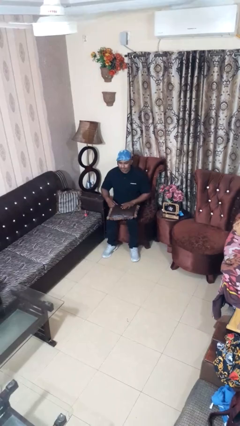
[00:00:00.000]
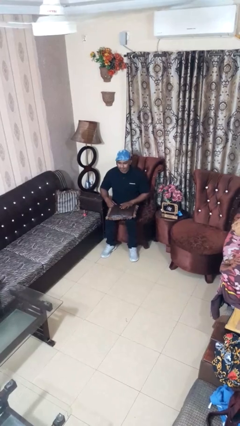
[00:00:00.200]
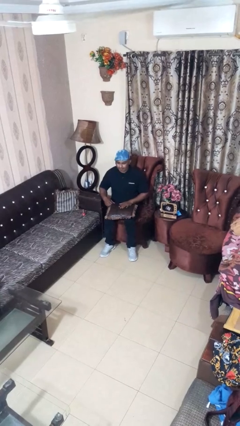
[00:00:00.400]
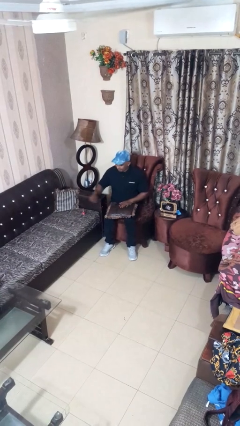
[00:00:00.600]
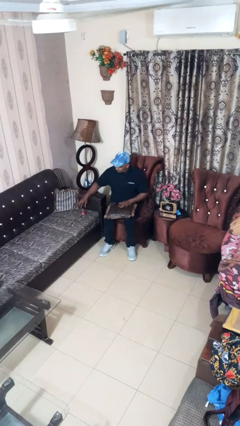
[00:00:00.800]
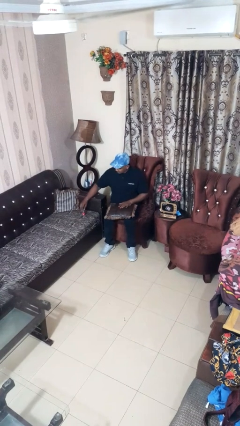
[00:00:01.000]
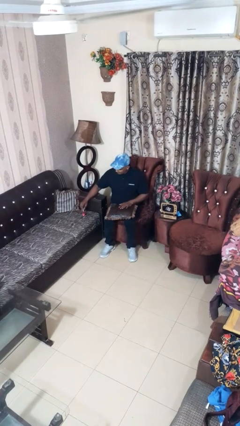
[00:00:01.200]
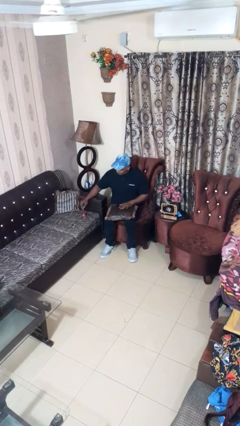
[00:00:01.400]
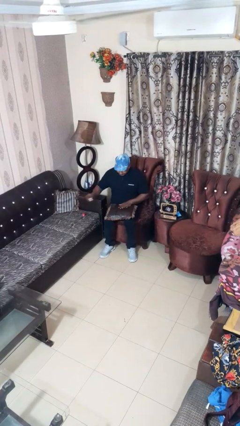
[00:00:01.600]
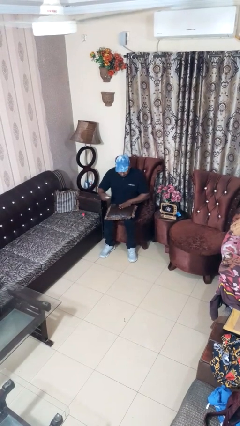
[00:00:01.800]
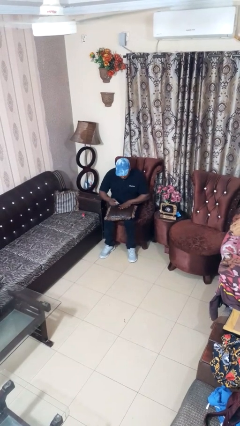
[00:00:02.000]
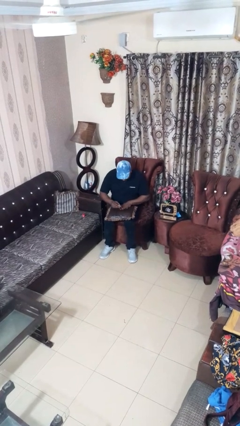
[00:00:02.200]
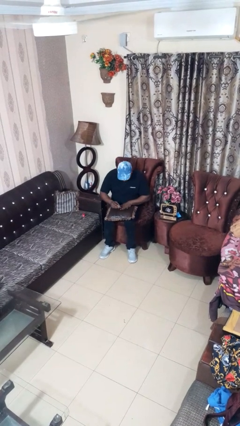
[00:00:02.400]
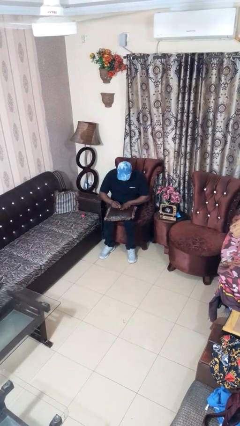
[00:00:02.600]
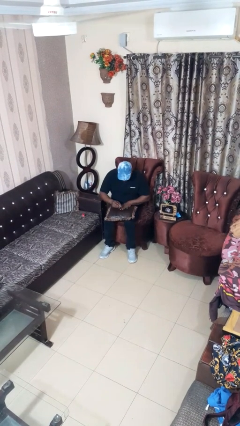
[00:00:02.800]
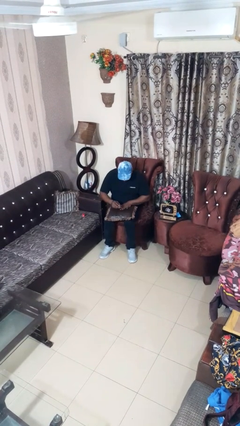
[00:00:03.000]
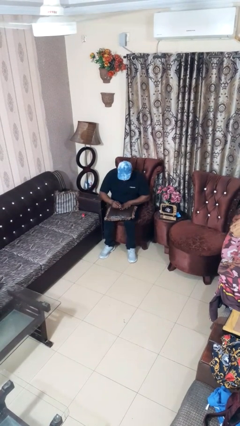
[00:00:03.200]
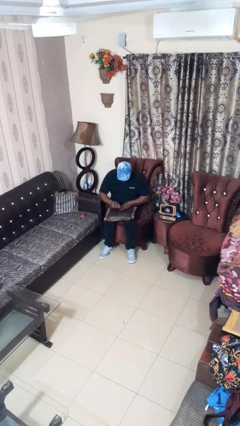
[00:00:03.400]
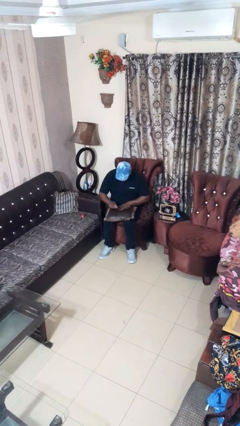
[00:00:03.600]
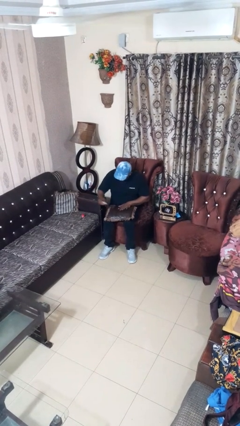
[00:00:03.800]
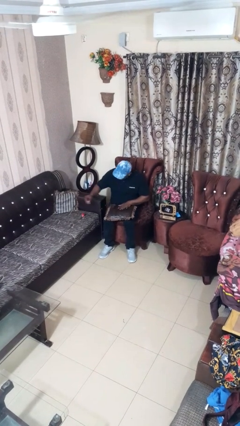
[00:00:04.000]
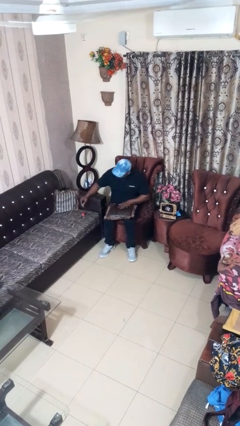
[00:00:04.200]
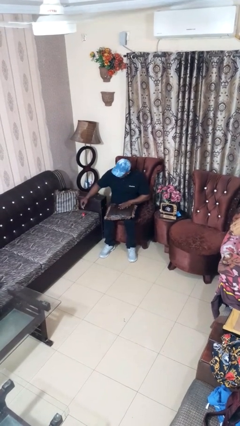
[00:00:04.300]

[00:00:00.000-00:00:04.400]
person paints fingernails

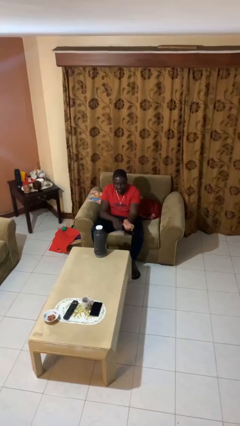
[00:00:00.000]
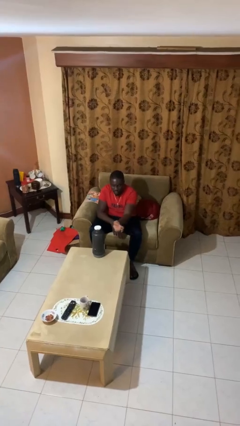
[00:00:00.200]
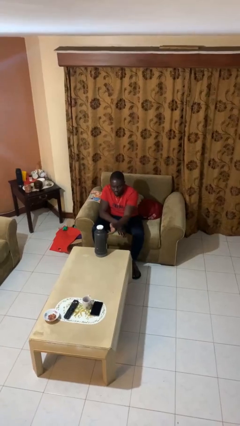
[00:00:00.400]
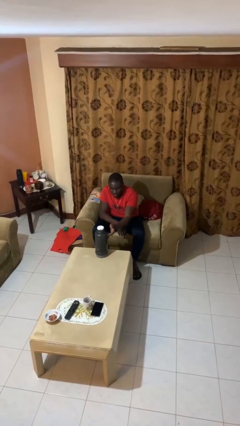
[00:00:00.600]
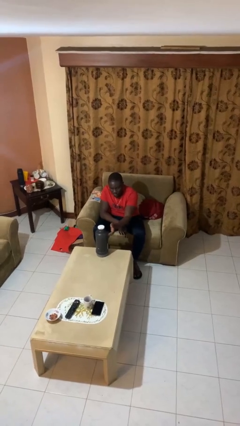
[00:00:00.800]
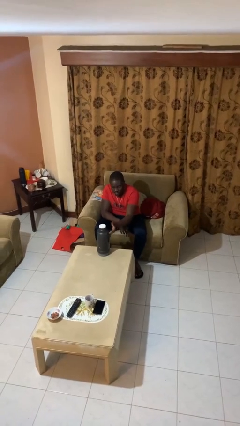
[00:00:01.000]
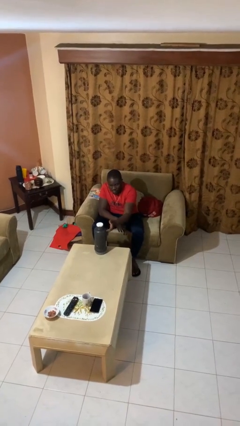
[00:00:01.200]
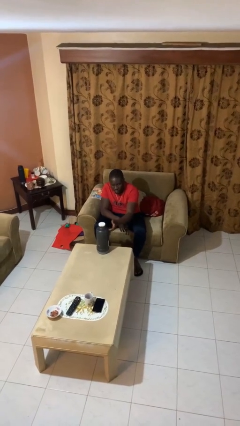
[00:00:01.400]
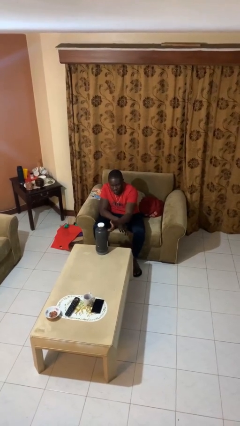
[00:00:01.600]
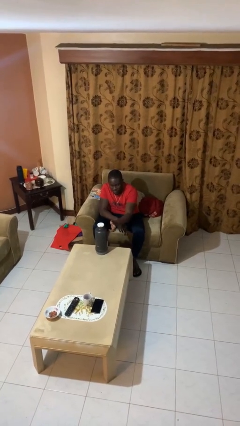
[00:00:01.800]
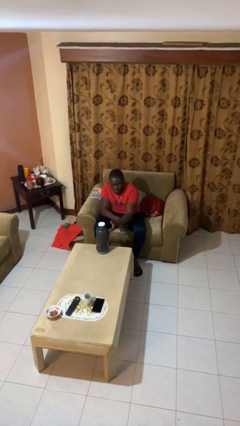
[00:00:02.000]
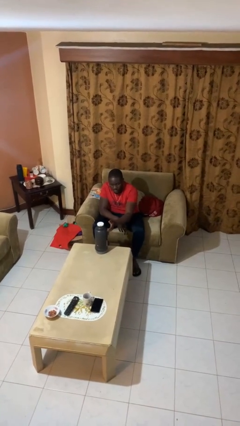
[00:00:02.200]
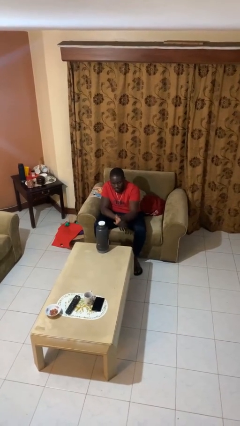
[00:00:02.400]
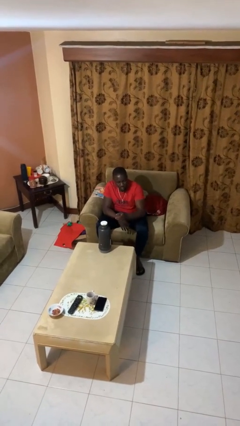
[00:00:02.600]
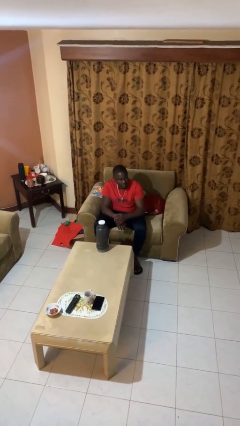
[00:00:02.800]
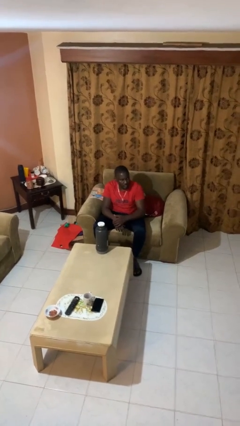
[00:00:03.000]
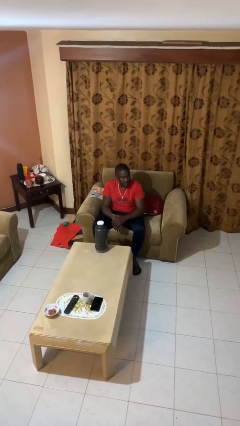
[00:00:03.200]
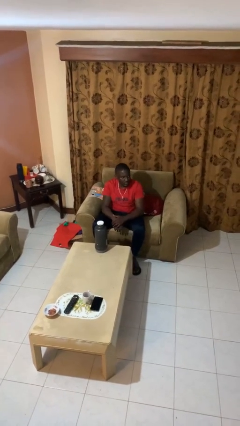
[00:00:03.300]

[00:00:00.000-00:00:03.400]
person taps object with finger

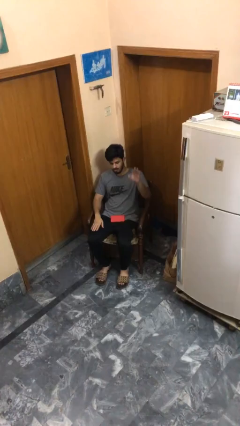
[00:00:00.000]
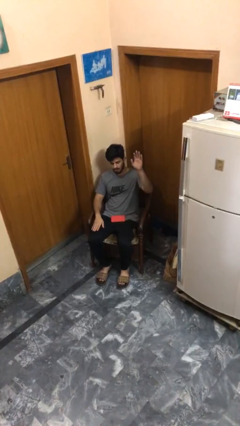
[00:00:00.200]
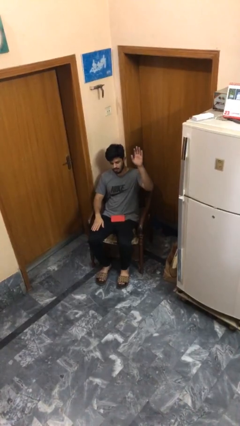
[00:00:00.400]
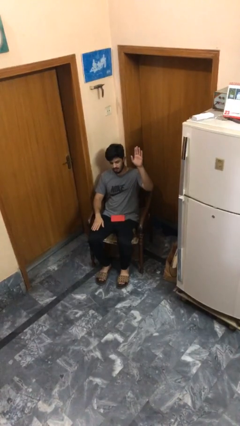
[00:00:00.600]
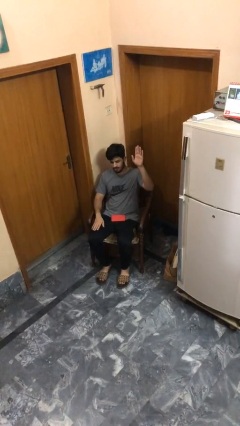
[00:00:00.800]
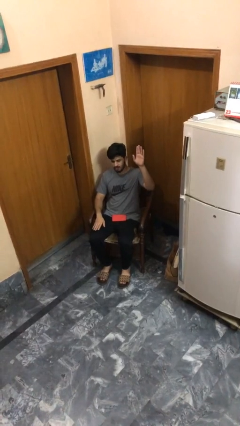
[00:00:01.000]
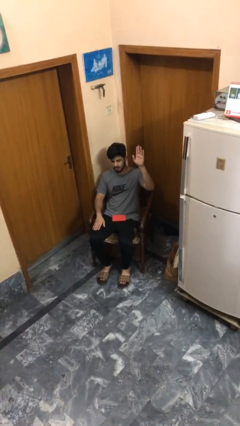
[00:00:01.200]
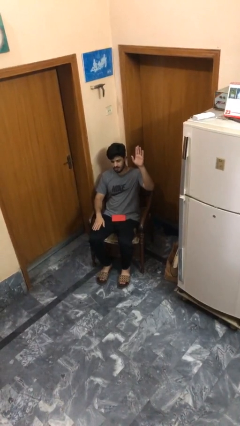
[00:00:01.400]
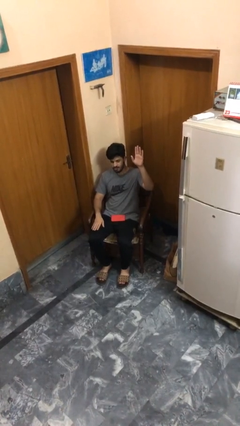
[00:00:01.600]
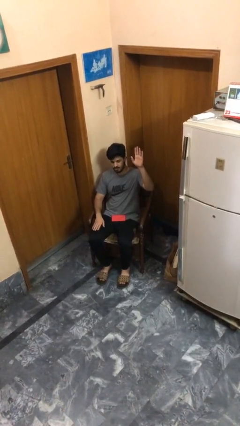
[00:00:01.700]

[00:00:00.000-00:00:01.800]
person gestures raise hand

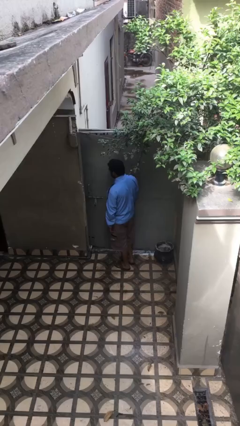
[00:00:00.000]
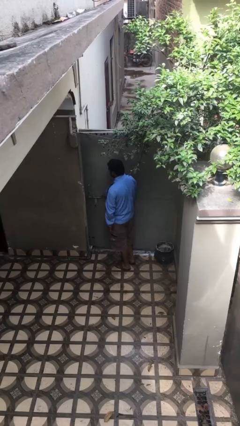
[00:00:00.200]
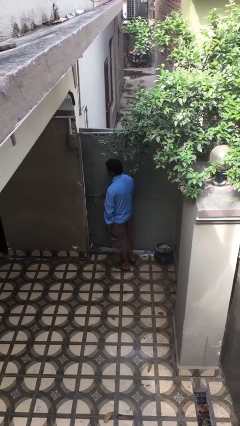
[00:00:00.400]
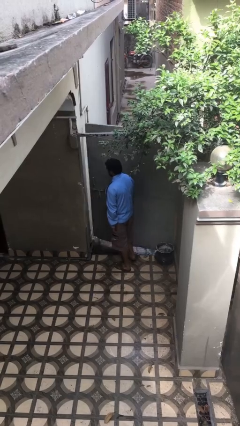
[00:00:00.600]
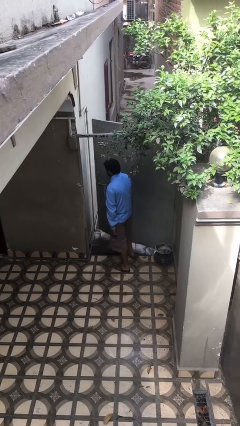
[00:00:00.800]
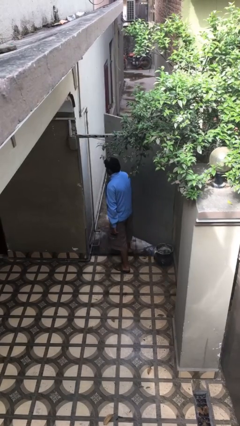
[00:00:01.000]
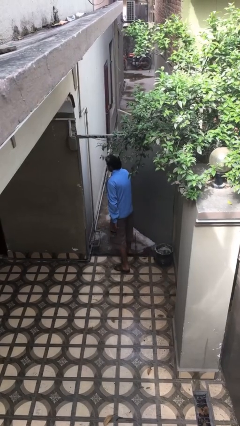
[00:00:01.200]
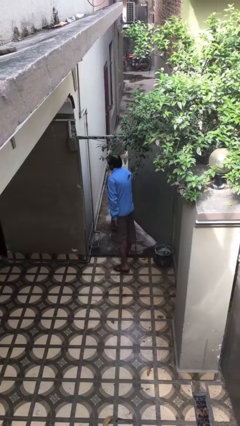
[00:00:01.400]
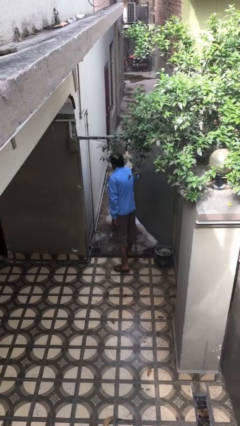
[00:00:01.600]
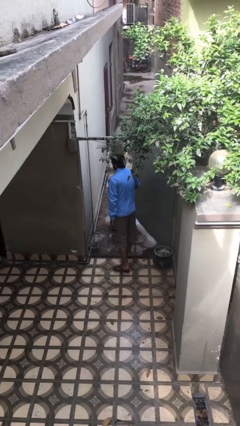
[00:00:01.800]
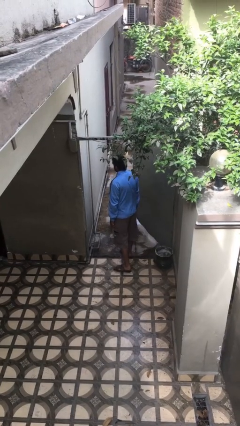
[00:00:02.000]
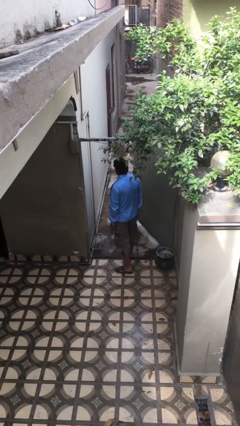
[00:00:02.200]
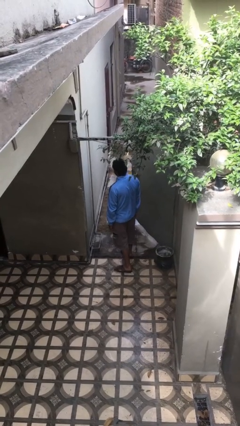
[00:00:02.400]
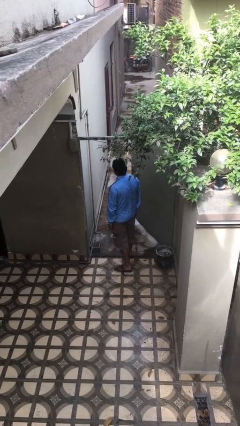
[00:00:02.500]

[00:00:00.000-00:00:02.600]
person opens facility door

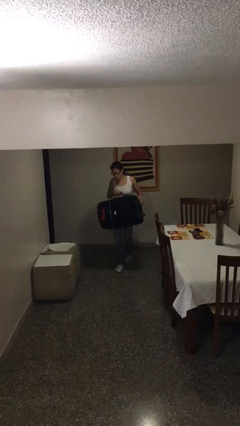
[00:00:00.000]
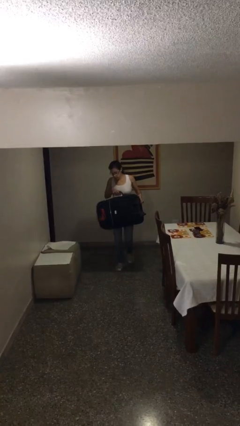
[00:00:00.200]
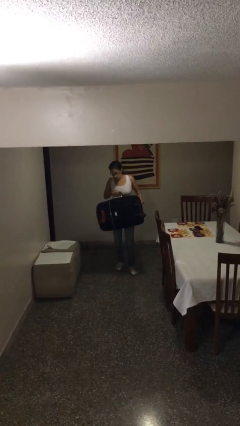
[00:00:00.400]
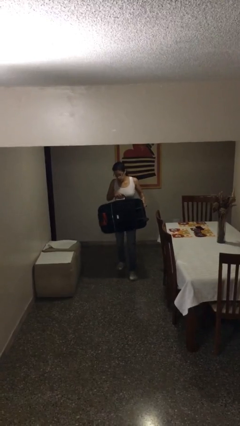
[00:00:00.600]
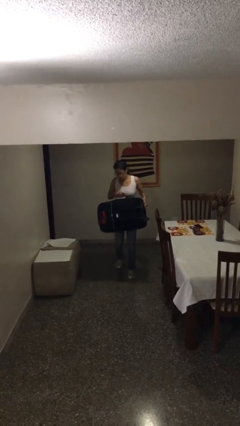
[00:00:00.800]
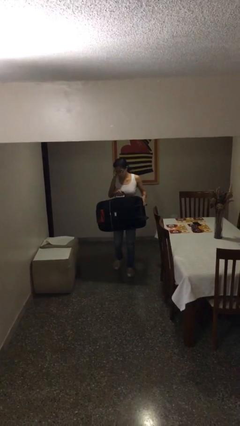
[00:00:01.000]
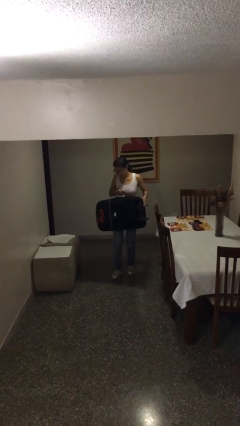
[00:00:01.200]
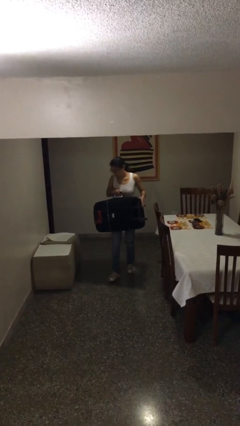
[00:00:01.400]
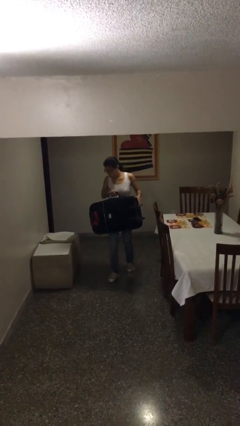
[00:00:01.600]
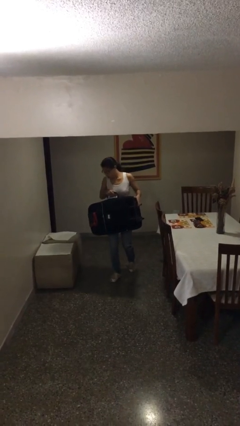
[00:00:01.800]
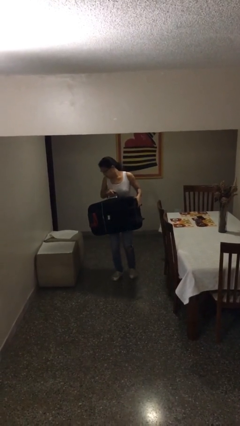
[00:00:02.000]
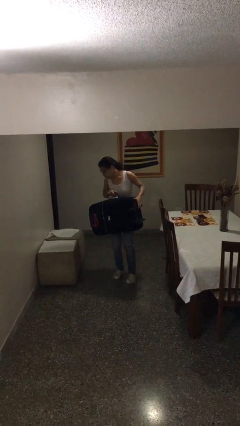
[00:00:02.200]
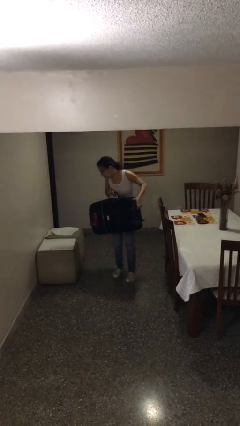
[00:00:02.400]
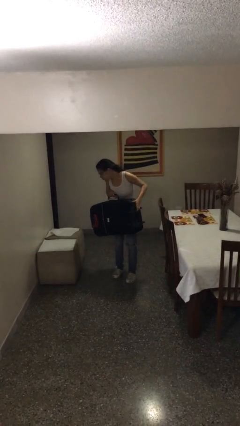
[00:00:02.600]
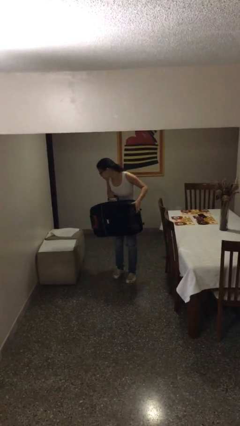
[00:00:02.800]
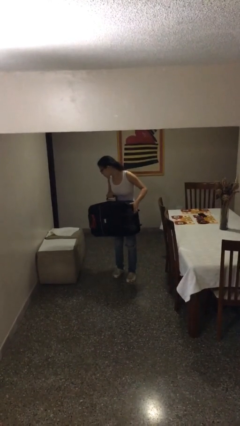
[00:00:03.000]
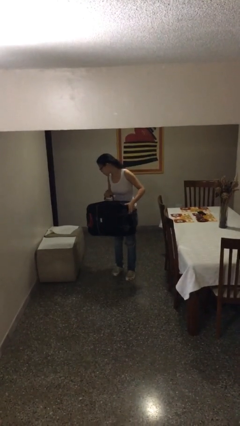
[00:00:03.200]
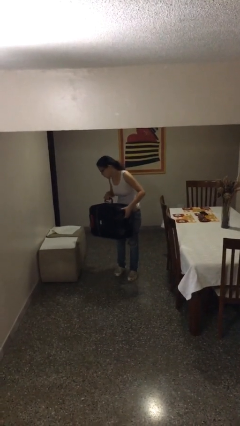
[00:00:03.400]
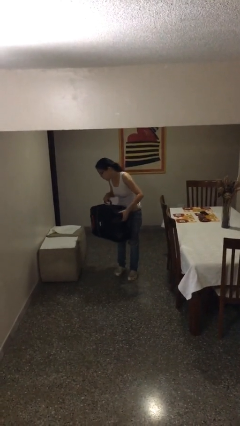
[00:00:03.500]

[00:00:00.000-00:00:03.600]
person carries heavy object

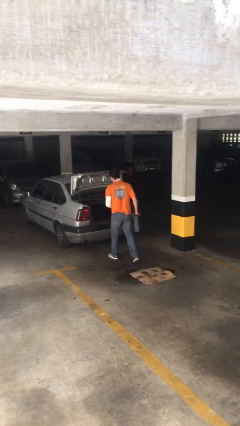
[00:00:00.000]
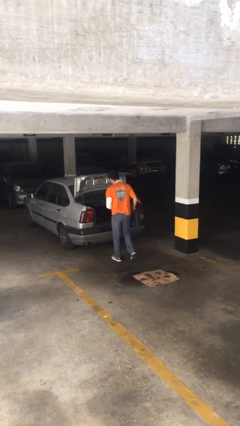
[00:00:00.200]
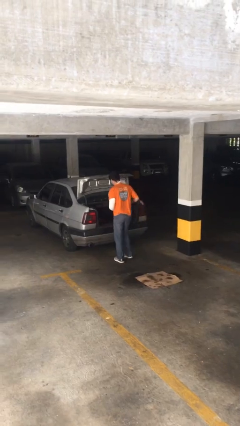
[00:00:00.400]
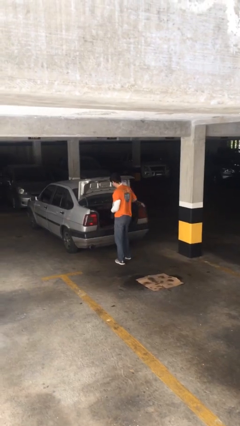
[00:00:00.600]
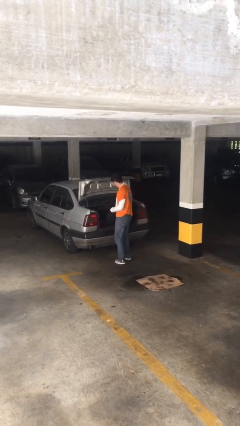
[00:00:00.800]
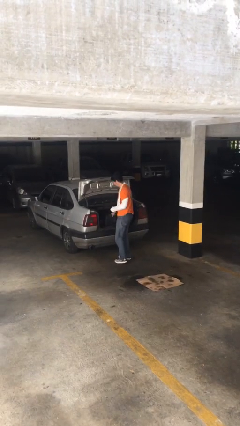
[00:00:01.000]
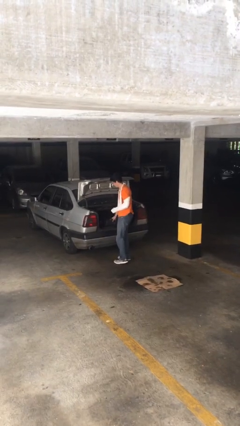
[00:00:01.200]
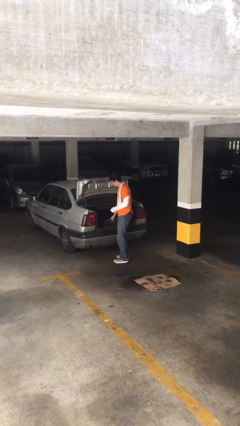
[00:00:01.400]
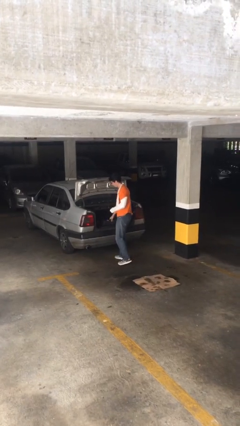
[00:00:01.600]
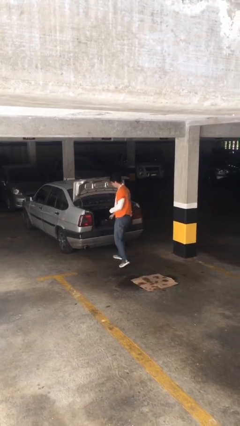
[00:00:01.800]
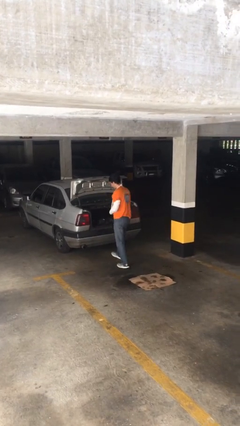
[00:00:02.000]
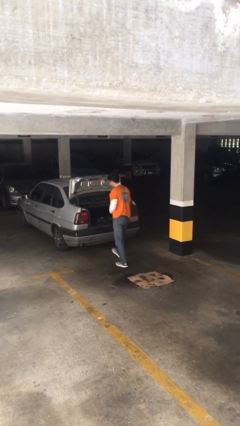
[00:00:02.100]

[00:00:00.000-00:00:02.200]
person loads car
